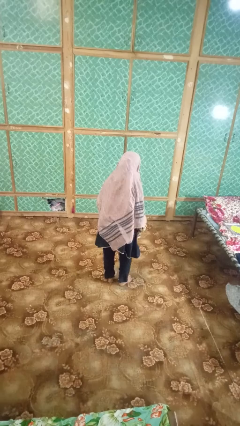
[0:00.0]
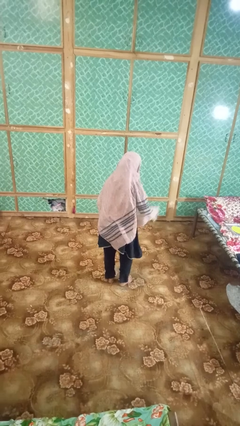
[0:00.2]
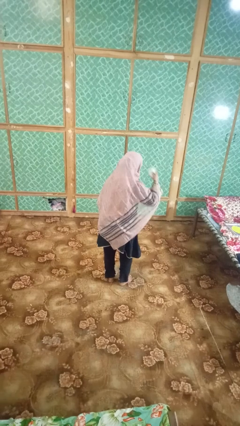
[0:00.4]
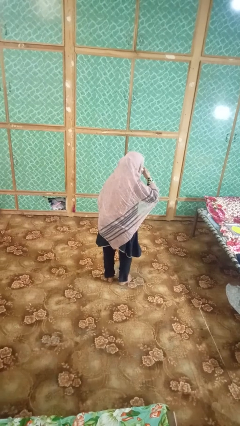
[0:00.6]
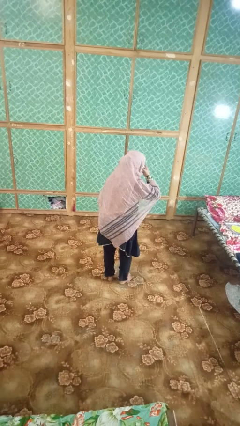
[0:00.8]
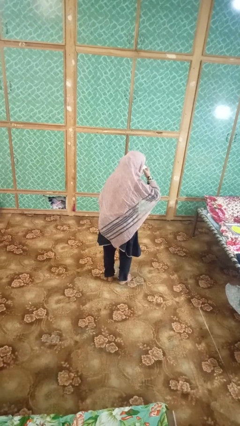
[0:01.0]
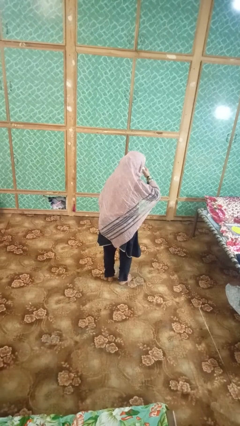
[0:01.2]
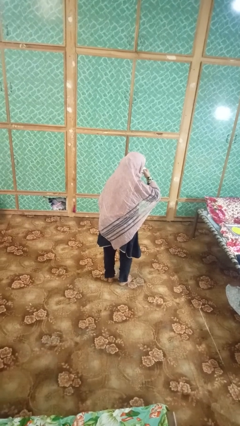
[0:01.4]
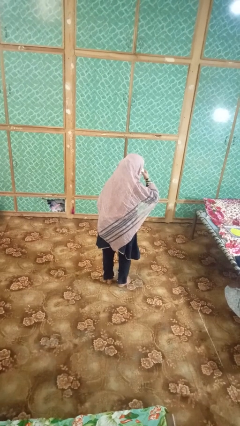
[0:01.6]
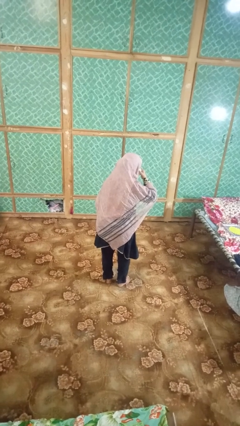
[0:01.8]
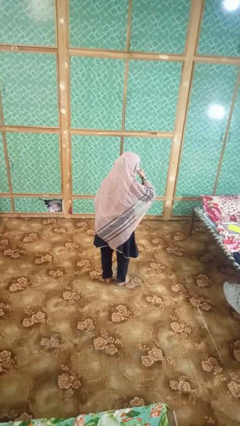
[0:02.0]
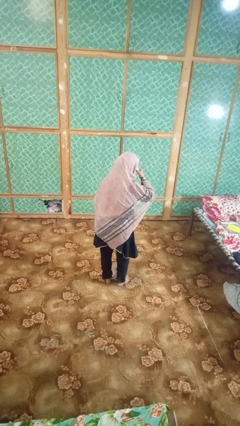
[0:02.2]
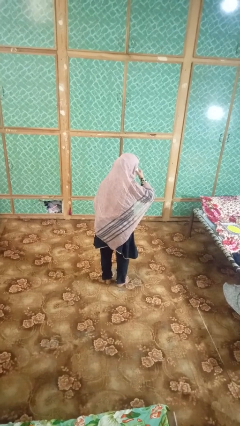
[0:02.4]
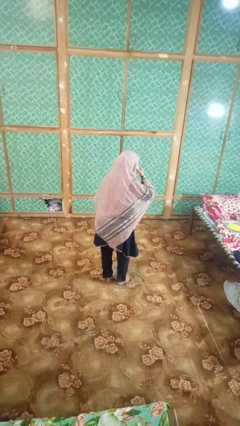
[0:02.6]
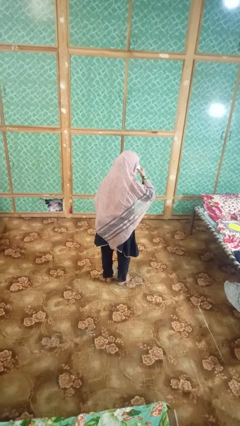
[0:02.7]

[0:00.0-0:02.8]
person blows nose

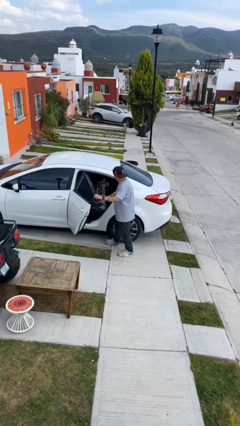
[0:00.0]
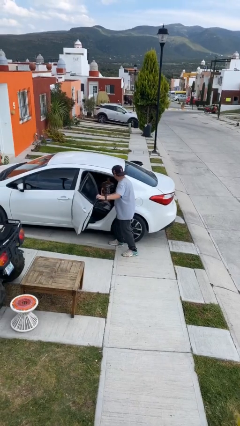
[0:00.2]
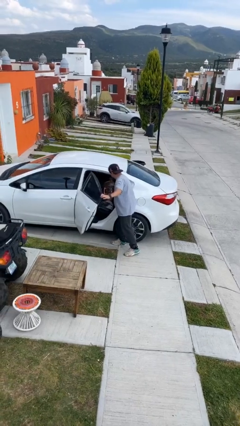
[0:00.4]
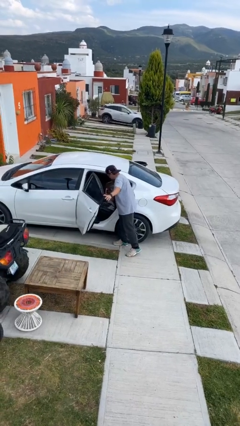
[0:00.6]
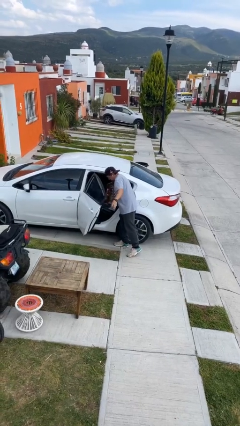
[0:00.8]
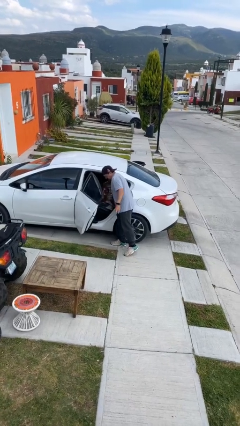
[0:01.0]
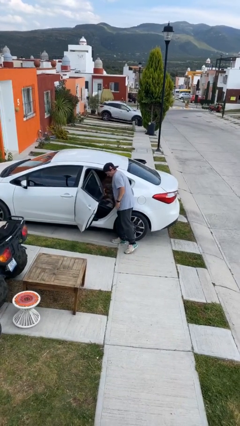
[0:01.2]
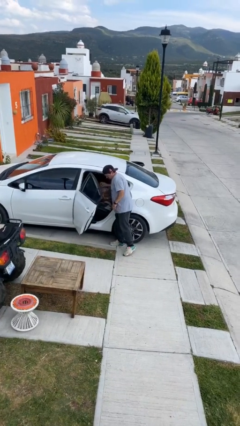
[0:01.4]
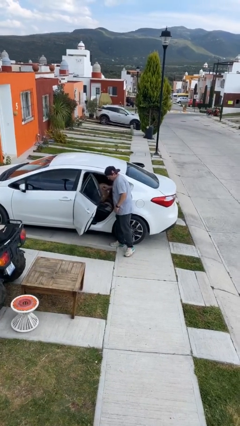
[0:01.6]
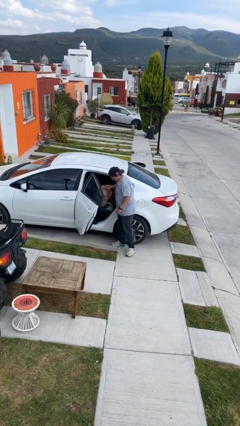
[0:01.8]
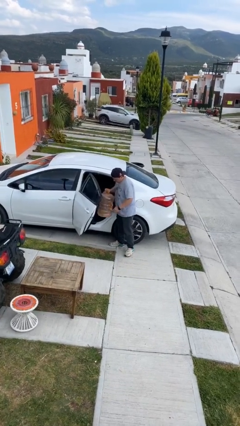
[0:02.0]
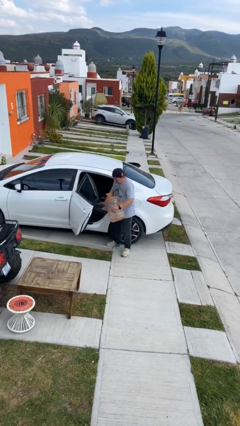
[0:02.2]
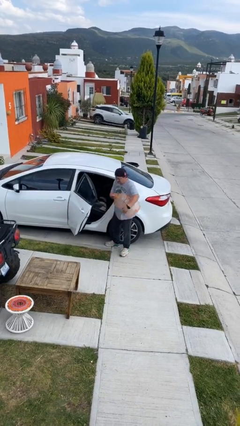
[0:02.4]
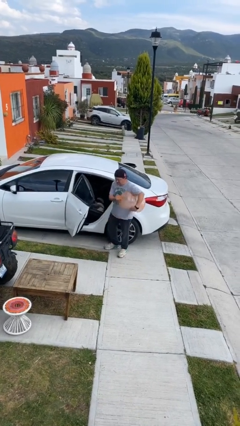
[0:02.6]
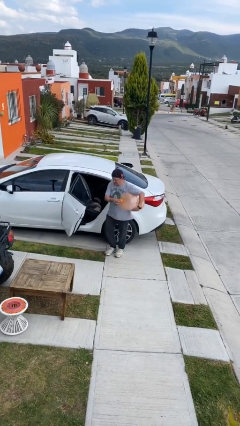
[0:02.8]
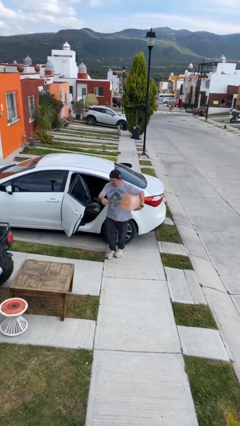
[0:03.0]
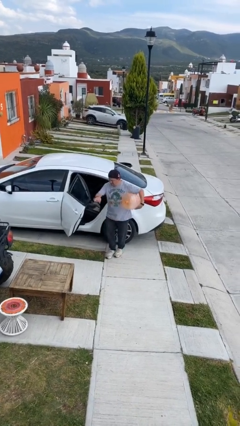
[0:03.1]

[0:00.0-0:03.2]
person unloads car

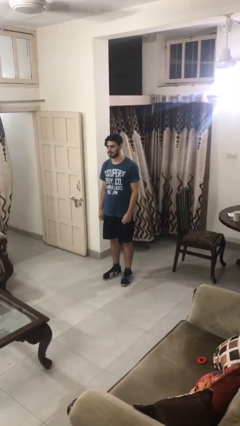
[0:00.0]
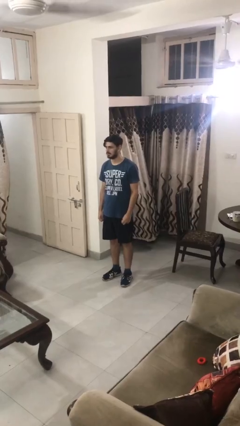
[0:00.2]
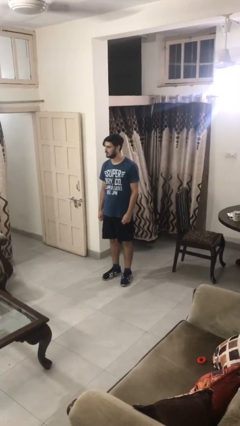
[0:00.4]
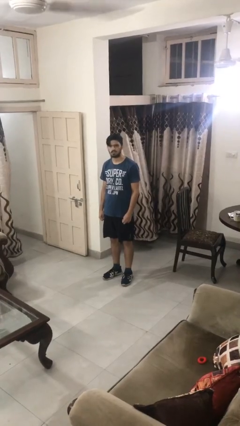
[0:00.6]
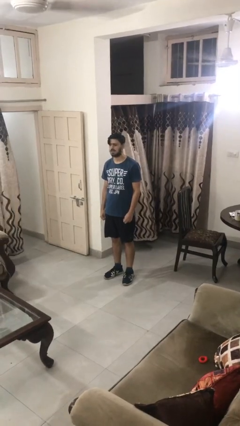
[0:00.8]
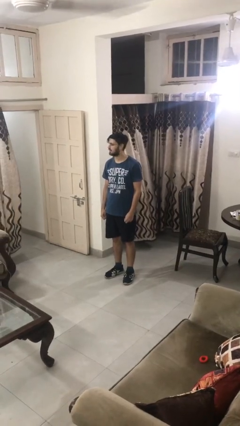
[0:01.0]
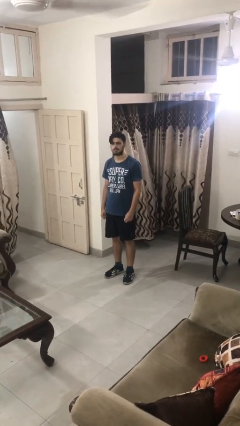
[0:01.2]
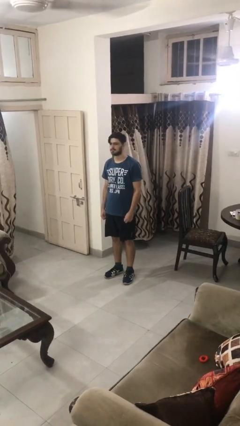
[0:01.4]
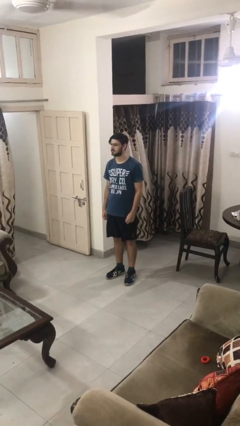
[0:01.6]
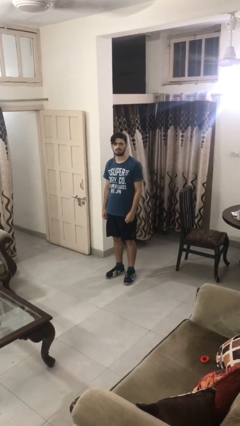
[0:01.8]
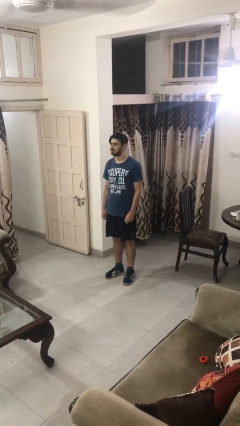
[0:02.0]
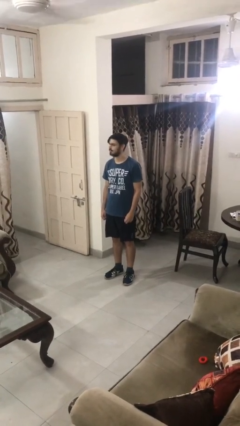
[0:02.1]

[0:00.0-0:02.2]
person shakes head

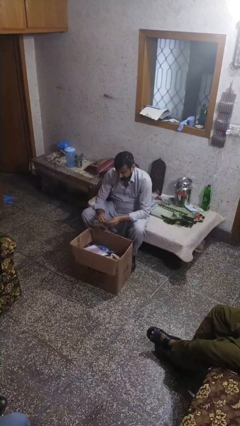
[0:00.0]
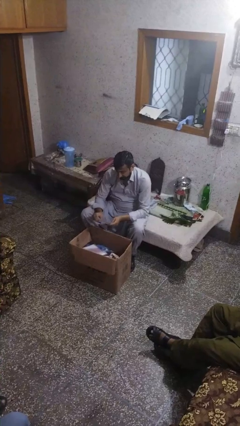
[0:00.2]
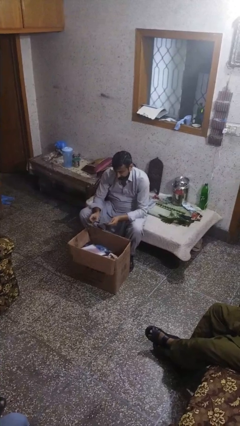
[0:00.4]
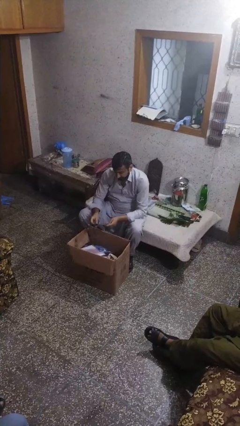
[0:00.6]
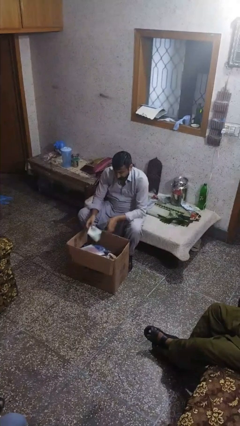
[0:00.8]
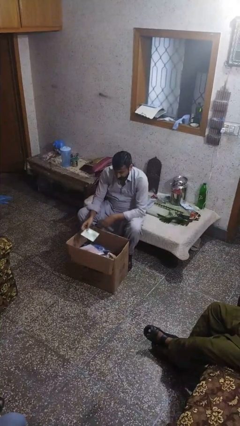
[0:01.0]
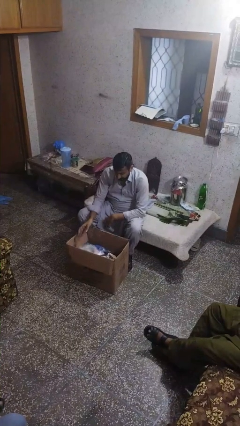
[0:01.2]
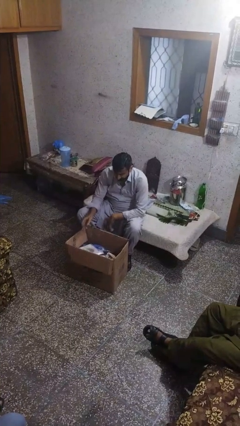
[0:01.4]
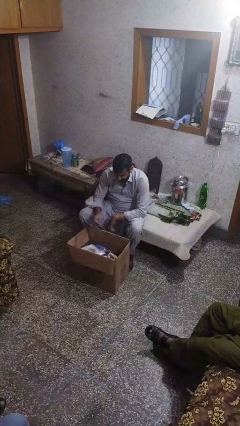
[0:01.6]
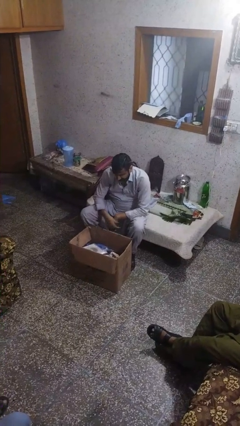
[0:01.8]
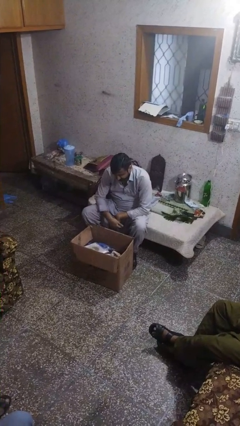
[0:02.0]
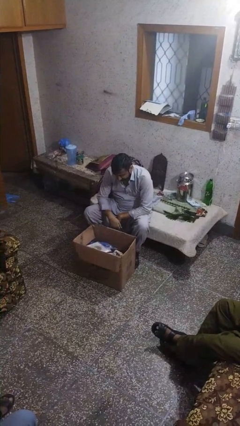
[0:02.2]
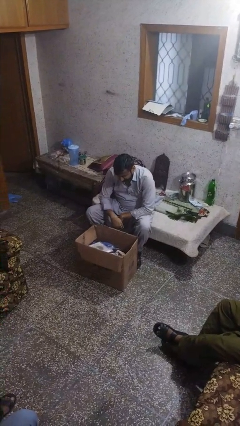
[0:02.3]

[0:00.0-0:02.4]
person puts object into box

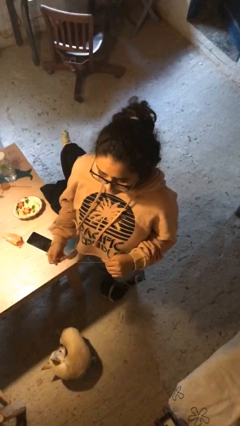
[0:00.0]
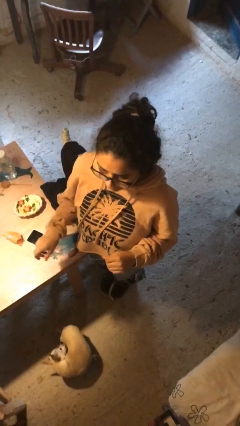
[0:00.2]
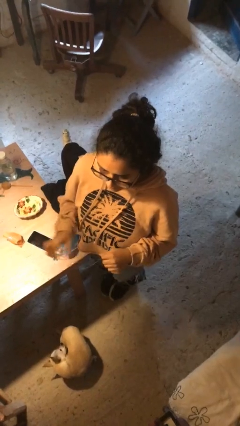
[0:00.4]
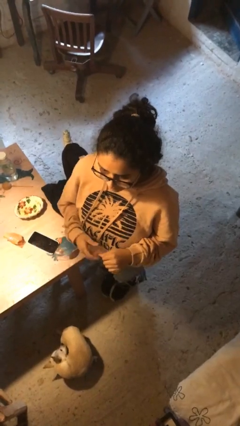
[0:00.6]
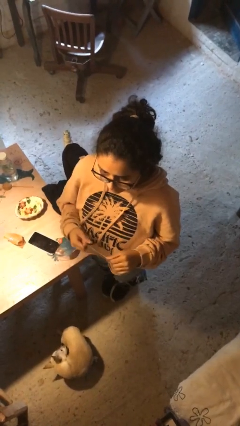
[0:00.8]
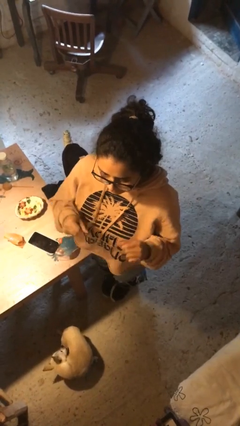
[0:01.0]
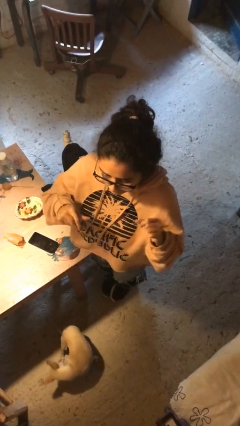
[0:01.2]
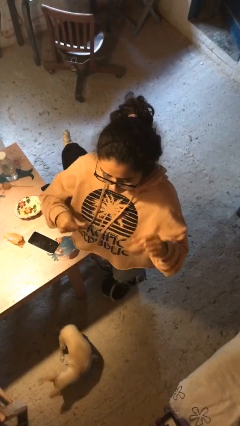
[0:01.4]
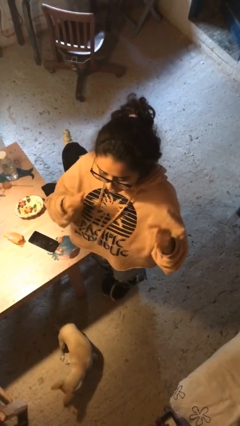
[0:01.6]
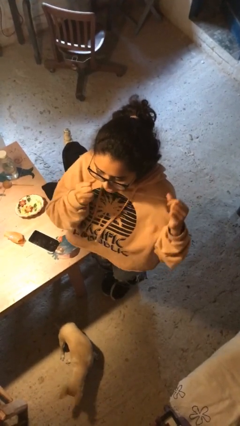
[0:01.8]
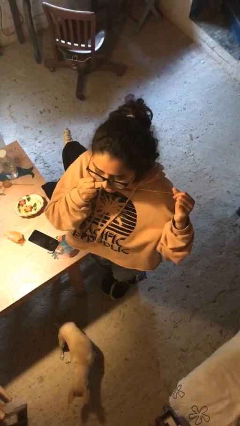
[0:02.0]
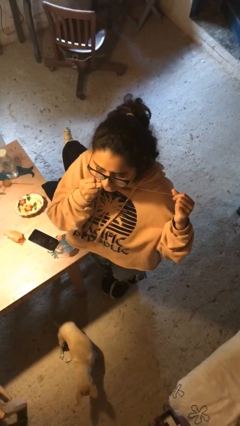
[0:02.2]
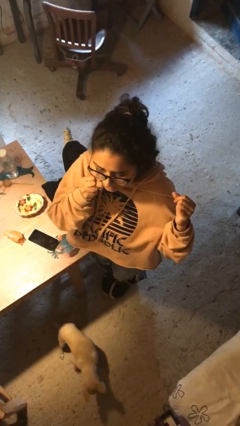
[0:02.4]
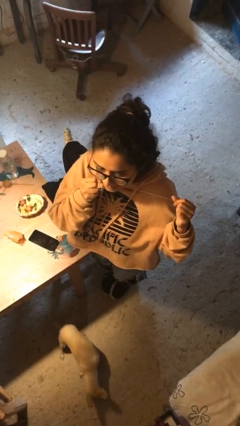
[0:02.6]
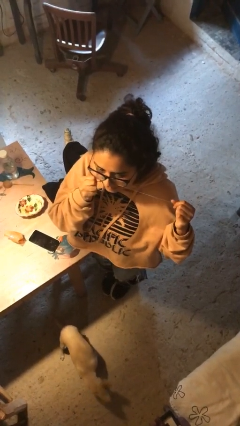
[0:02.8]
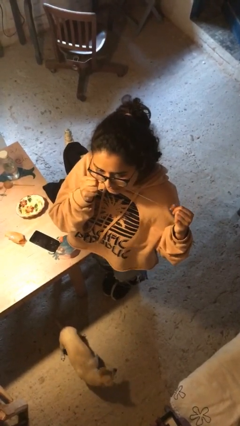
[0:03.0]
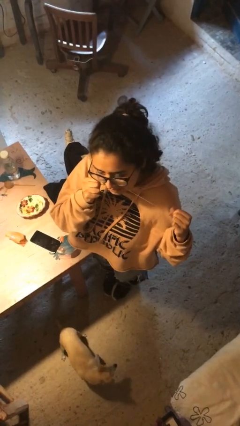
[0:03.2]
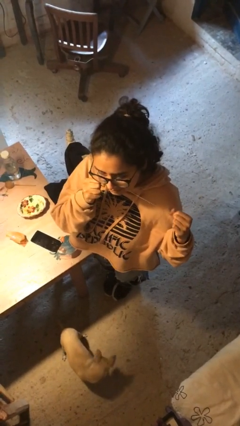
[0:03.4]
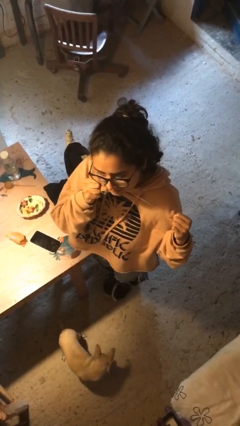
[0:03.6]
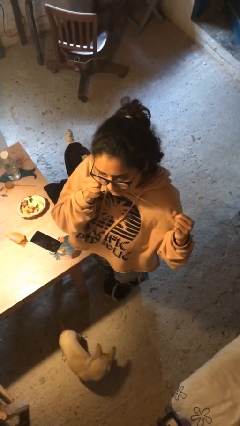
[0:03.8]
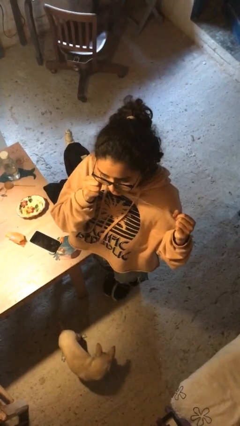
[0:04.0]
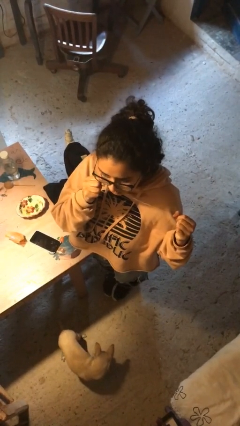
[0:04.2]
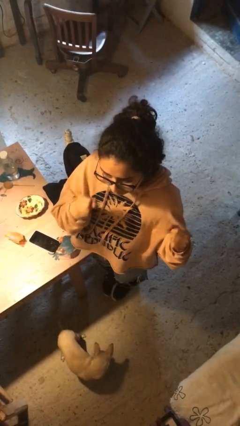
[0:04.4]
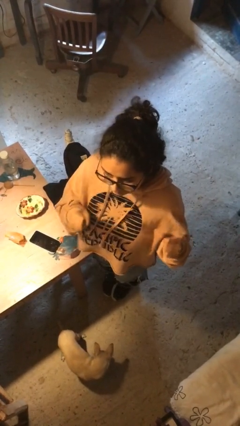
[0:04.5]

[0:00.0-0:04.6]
person flosses

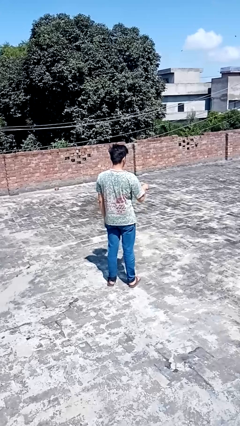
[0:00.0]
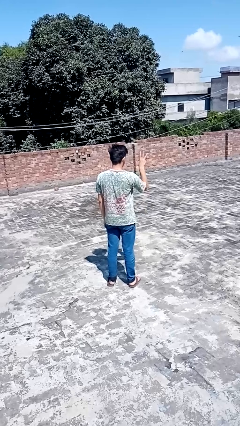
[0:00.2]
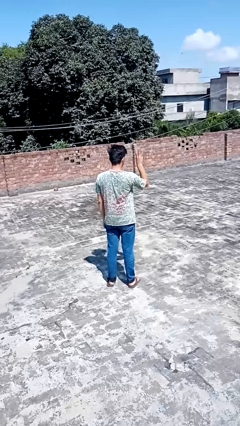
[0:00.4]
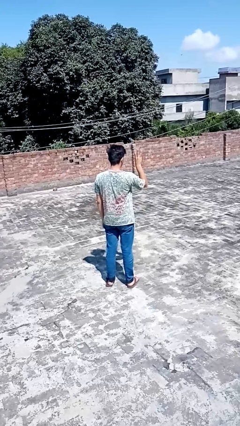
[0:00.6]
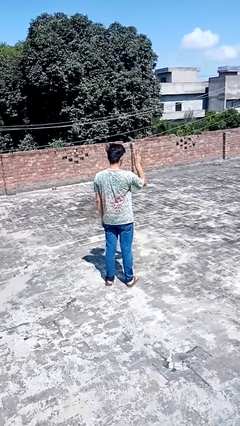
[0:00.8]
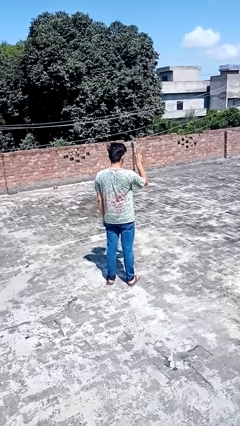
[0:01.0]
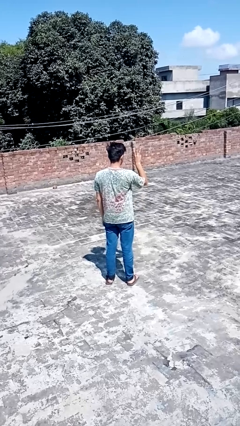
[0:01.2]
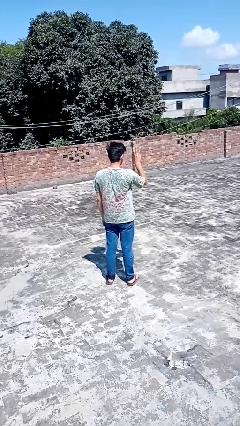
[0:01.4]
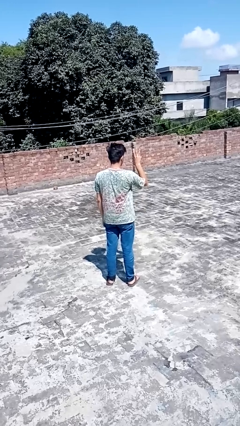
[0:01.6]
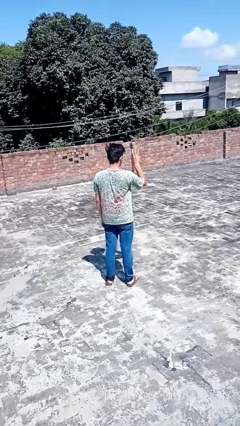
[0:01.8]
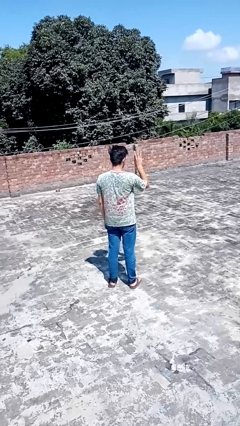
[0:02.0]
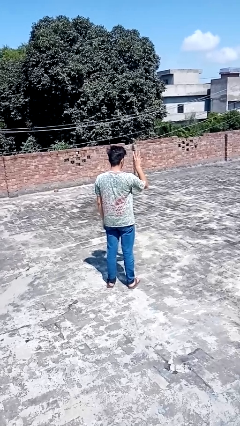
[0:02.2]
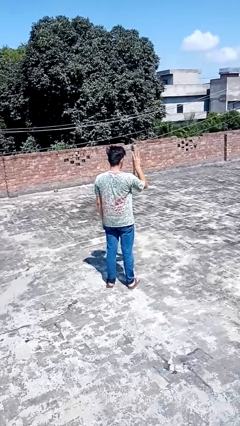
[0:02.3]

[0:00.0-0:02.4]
person gestures number three
